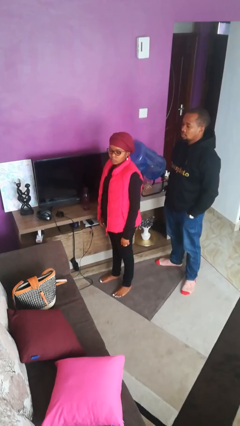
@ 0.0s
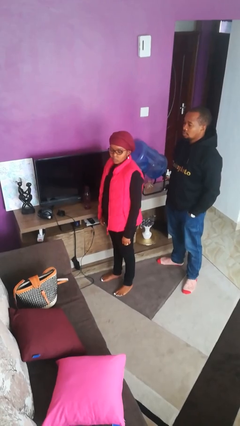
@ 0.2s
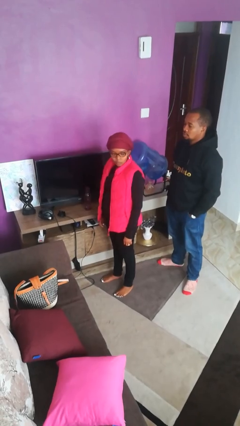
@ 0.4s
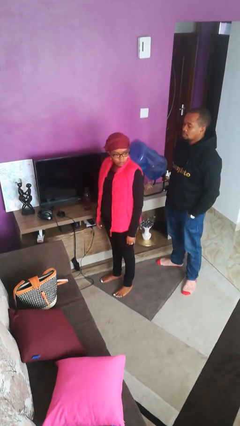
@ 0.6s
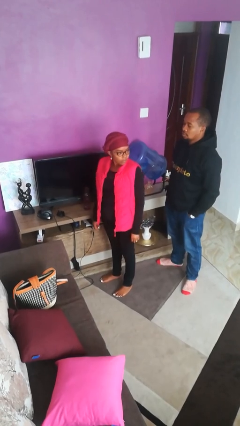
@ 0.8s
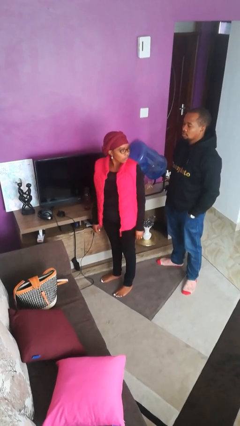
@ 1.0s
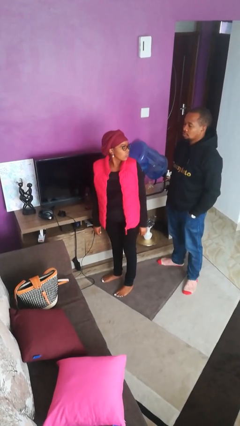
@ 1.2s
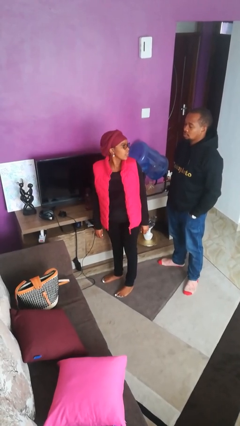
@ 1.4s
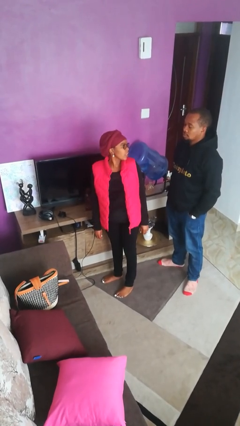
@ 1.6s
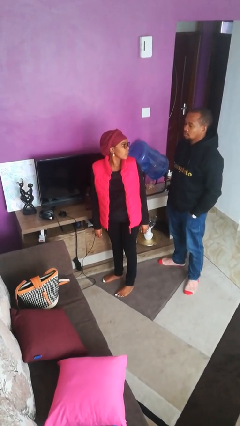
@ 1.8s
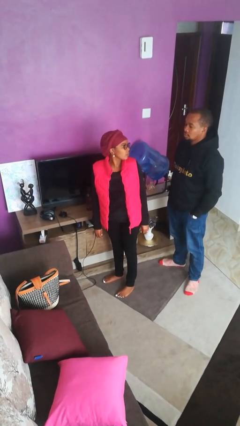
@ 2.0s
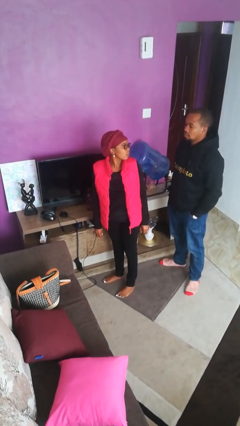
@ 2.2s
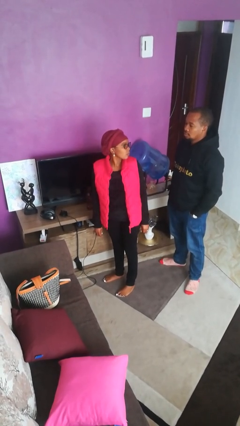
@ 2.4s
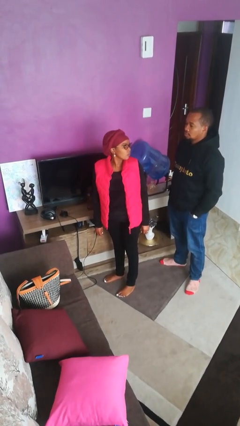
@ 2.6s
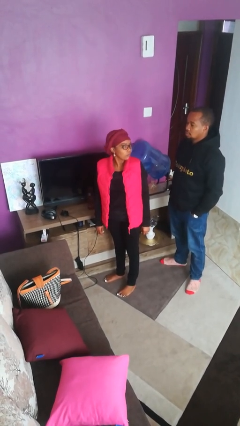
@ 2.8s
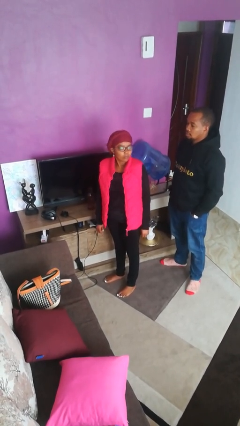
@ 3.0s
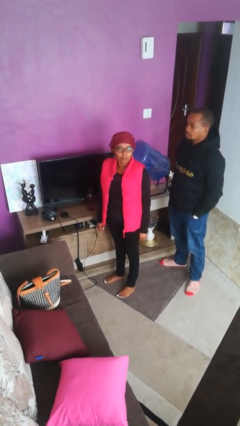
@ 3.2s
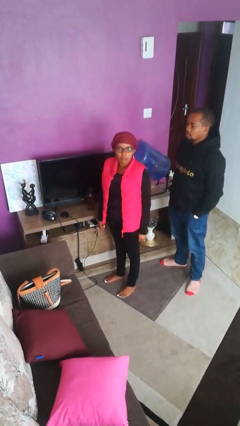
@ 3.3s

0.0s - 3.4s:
person looks over shoulder

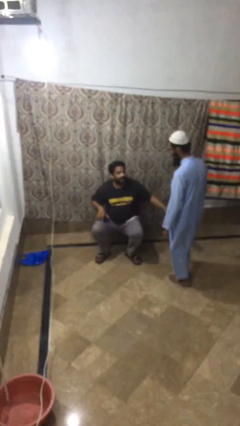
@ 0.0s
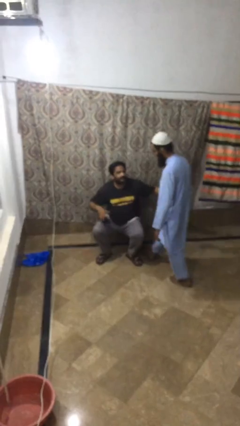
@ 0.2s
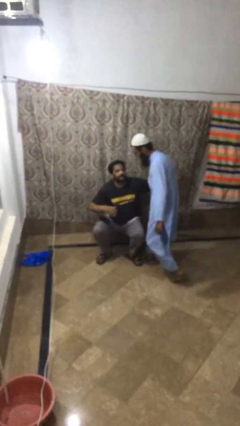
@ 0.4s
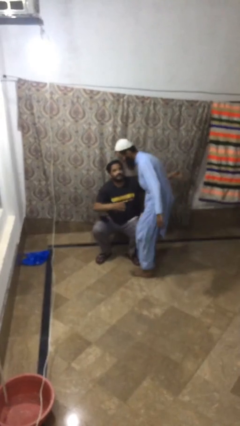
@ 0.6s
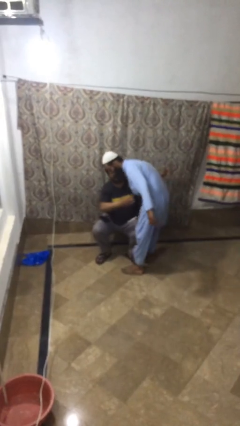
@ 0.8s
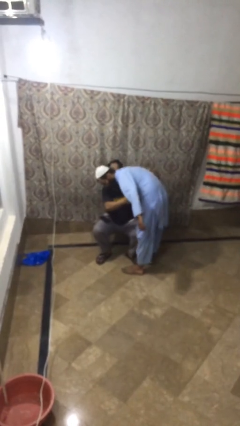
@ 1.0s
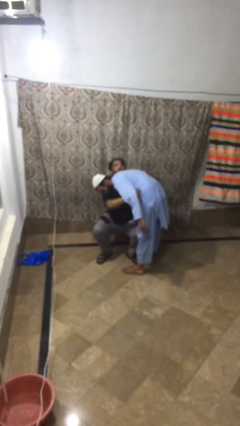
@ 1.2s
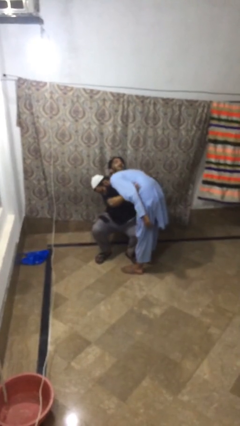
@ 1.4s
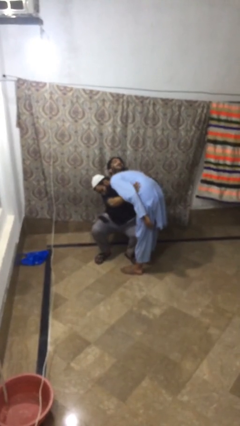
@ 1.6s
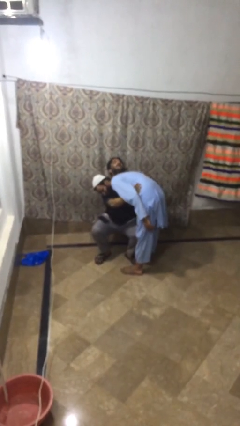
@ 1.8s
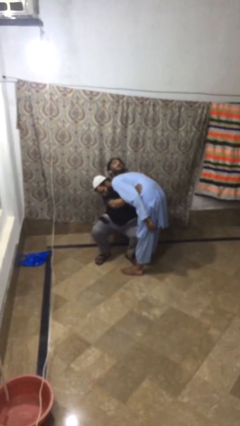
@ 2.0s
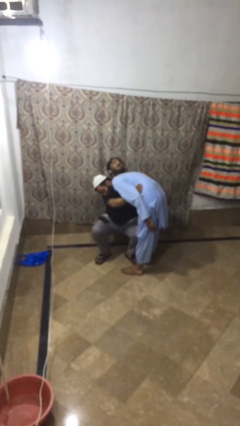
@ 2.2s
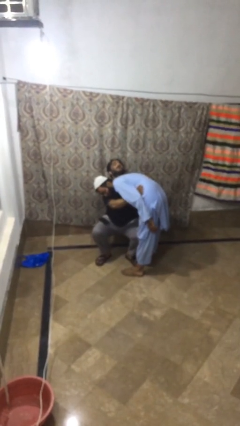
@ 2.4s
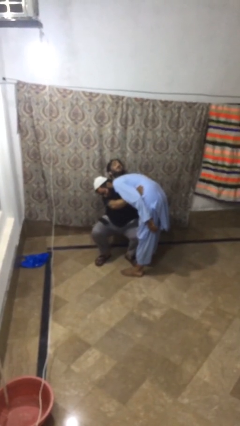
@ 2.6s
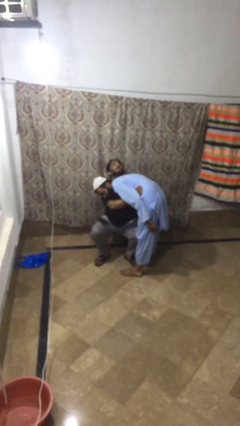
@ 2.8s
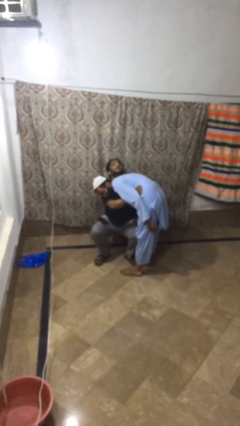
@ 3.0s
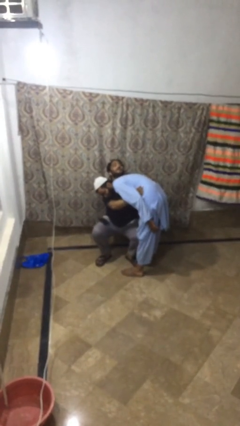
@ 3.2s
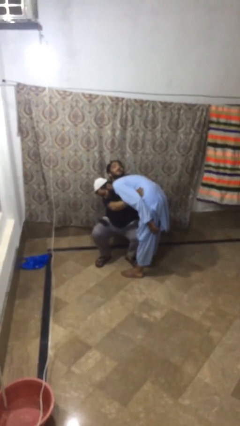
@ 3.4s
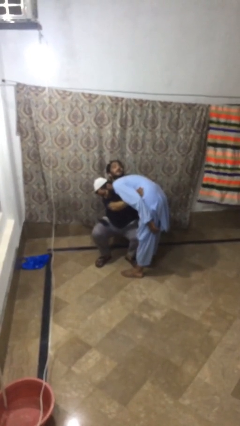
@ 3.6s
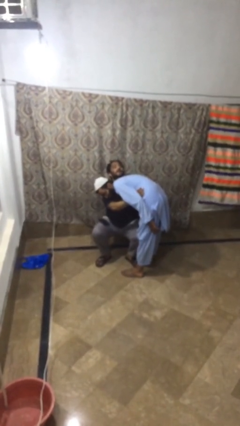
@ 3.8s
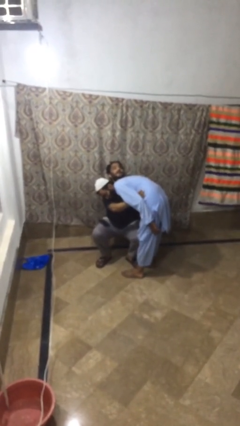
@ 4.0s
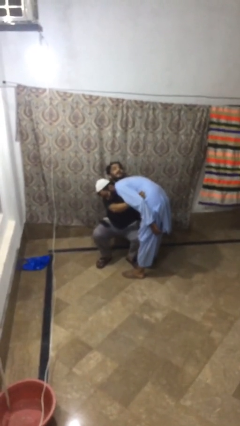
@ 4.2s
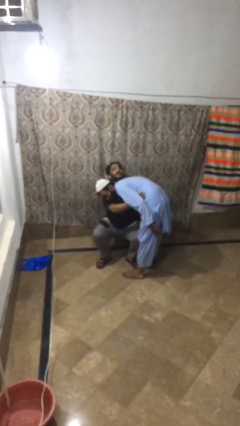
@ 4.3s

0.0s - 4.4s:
person embraces person

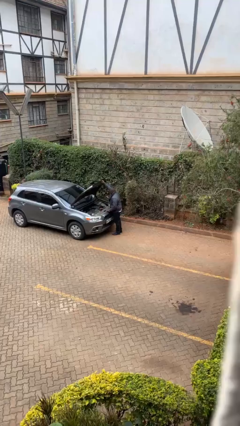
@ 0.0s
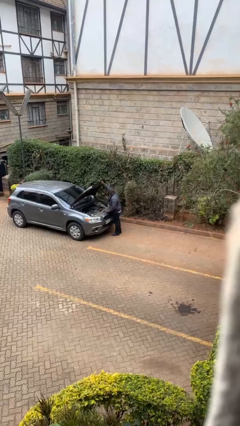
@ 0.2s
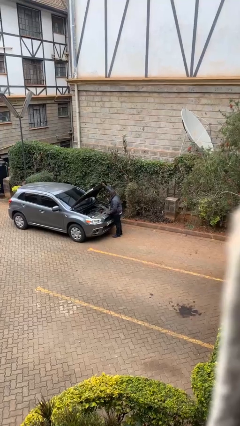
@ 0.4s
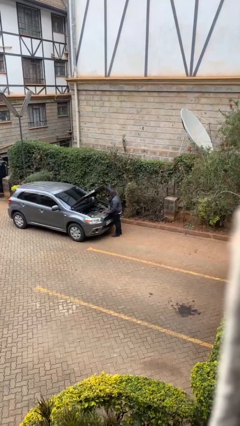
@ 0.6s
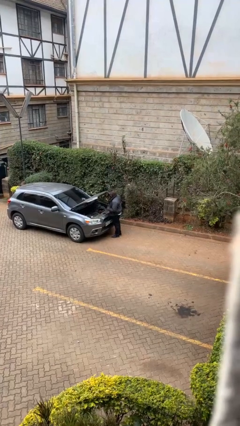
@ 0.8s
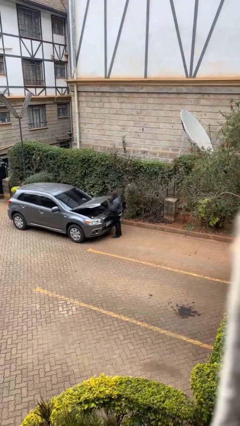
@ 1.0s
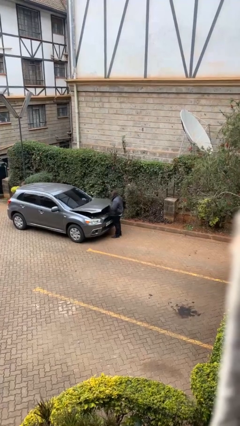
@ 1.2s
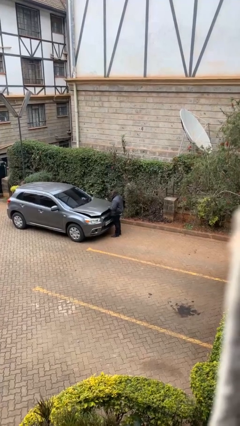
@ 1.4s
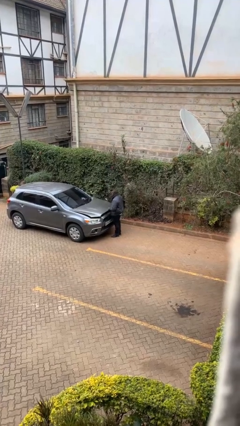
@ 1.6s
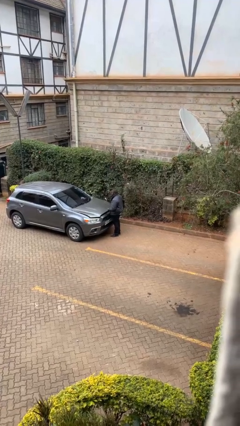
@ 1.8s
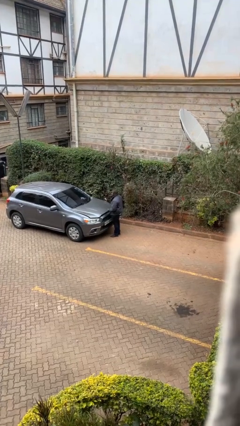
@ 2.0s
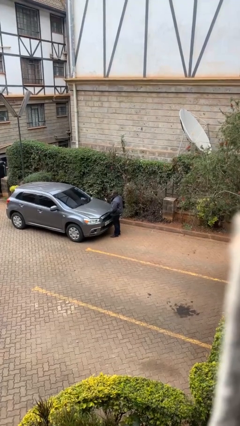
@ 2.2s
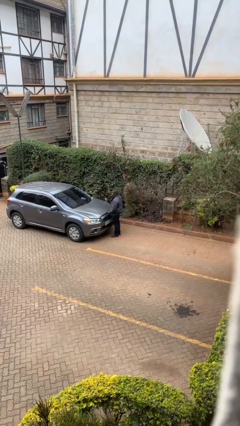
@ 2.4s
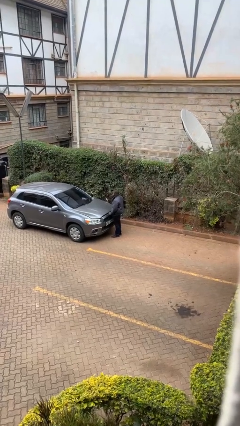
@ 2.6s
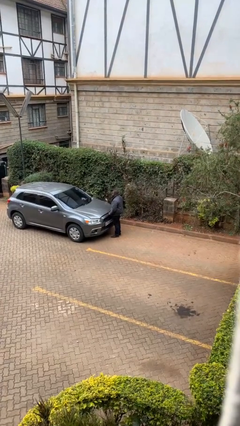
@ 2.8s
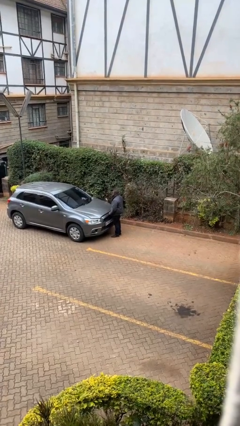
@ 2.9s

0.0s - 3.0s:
person closes car hood

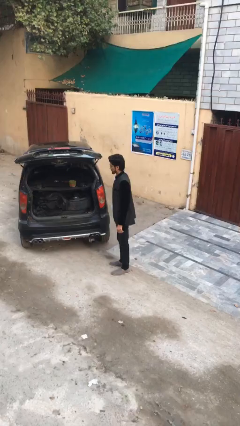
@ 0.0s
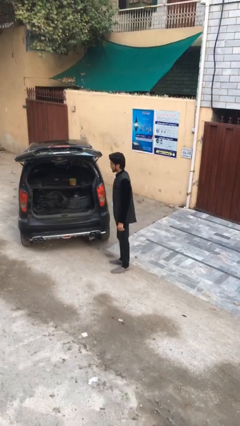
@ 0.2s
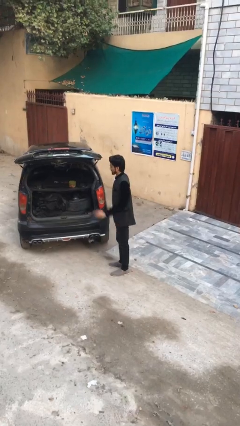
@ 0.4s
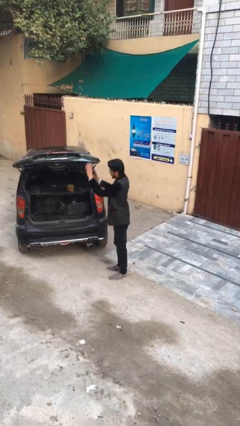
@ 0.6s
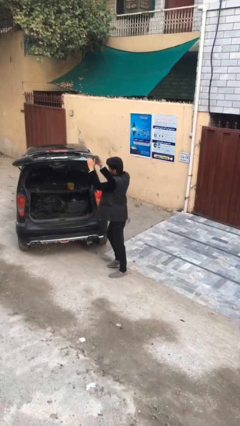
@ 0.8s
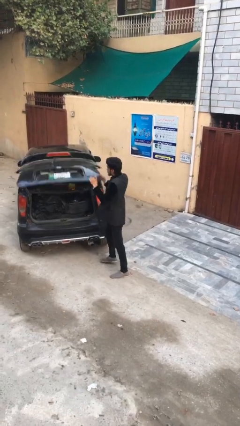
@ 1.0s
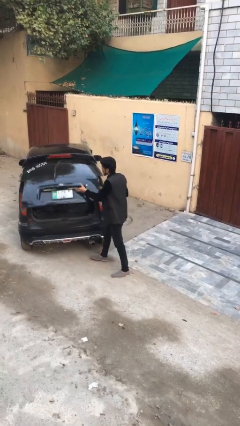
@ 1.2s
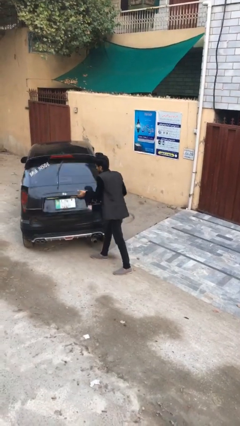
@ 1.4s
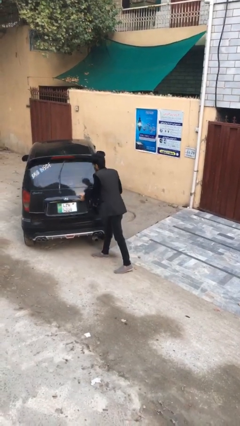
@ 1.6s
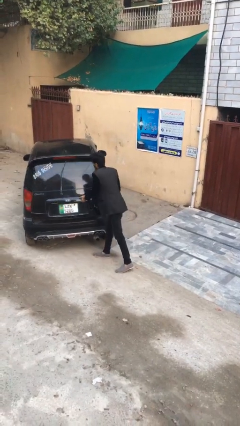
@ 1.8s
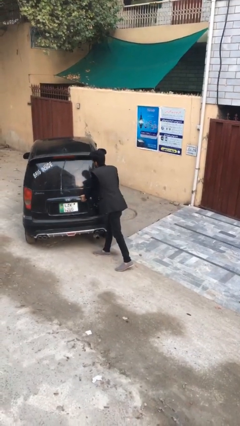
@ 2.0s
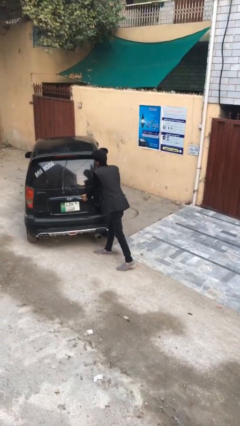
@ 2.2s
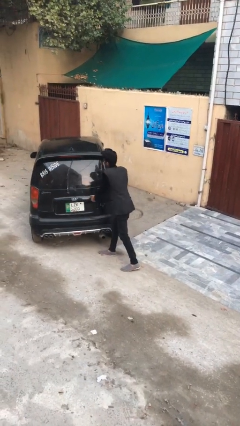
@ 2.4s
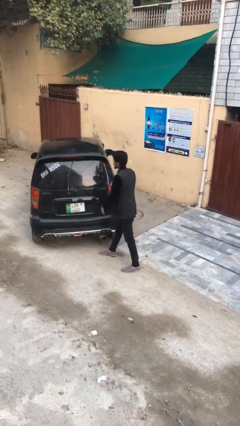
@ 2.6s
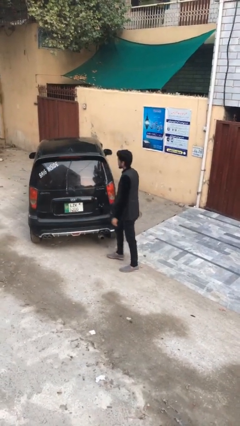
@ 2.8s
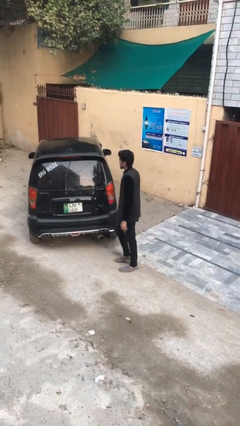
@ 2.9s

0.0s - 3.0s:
person closes car trunk

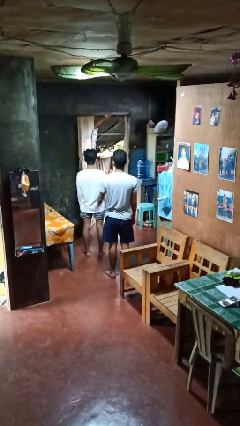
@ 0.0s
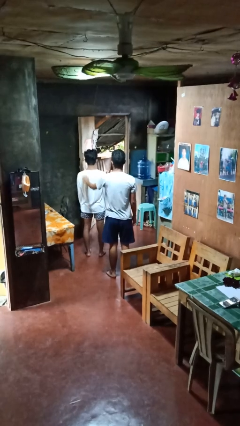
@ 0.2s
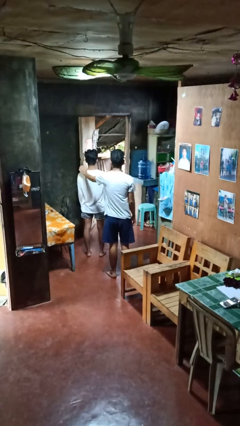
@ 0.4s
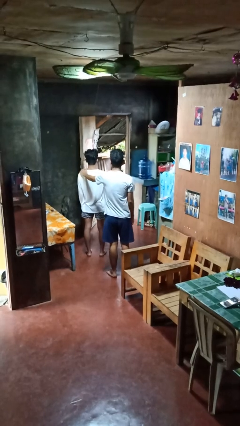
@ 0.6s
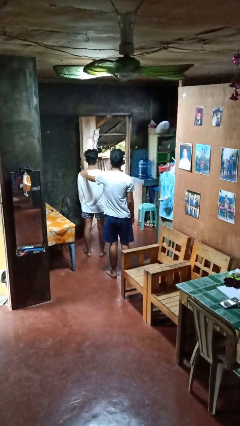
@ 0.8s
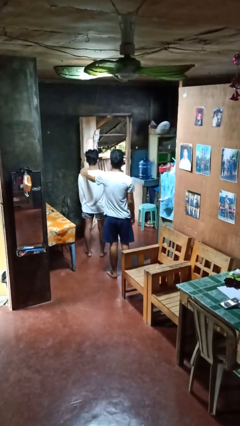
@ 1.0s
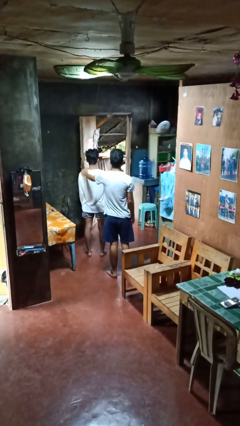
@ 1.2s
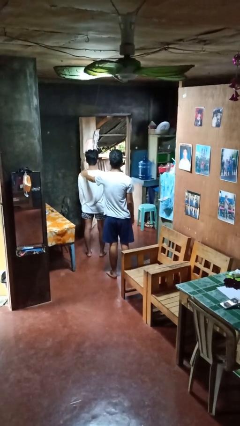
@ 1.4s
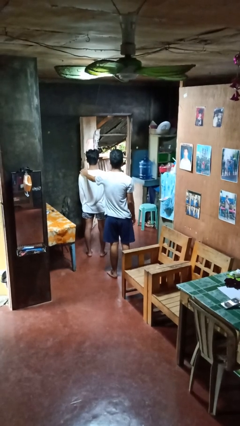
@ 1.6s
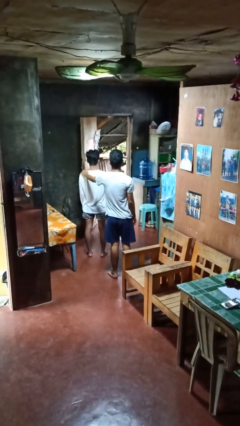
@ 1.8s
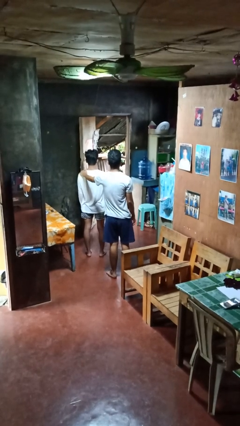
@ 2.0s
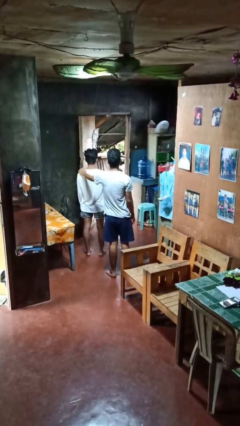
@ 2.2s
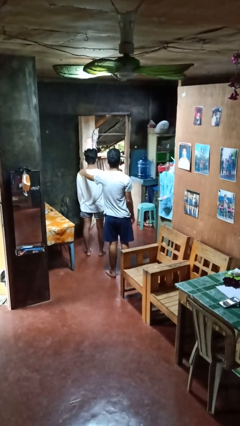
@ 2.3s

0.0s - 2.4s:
person pounds shoulders of person

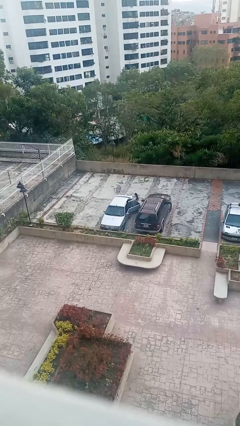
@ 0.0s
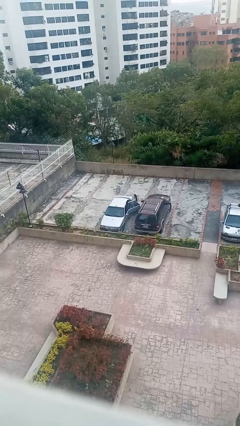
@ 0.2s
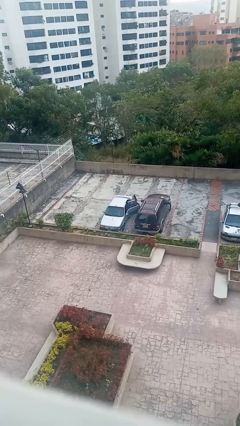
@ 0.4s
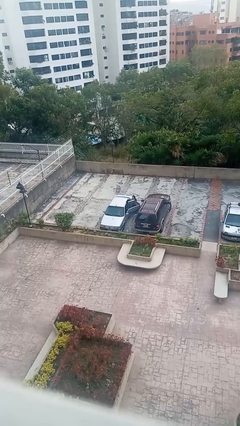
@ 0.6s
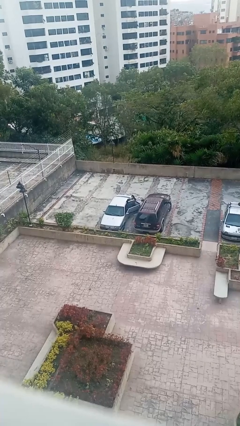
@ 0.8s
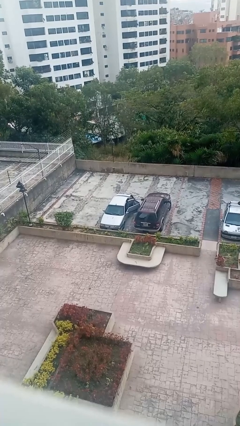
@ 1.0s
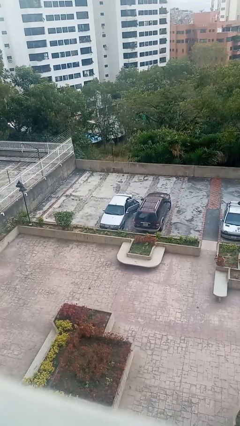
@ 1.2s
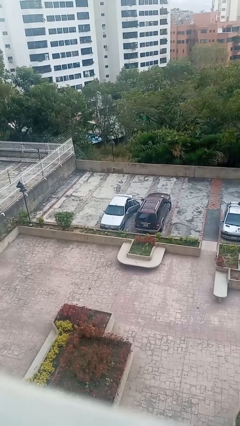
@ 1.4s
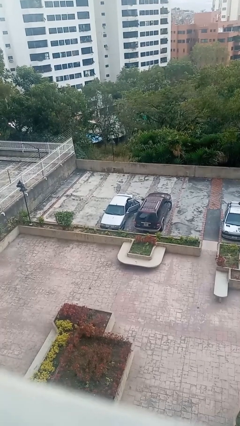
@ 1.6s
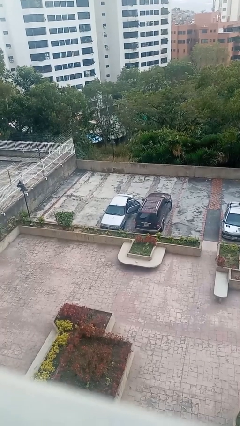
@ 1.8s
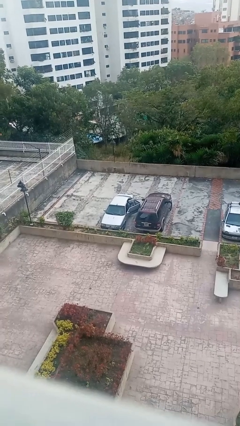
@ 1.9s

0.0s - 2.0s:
car picks up person
